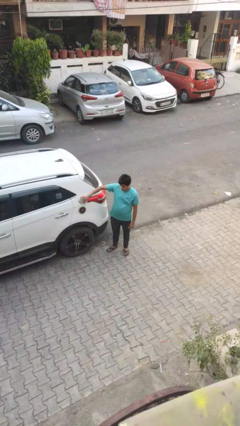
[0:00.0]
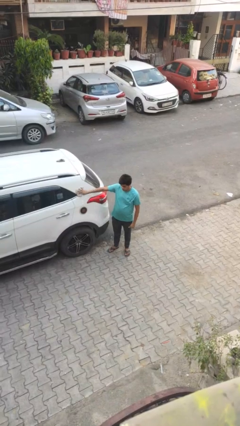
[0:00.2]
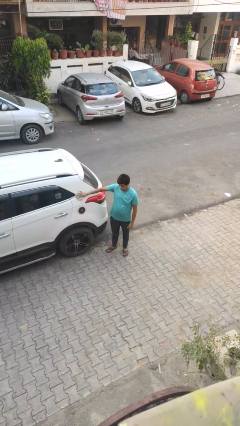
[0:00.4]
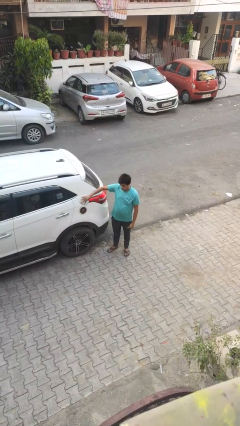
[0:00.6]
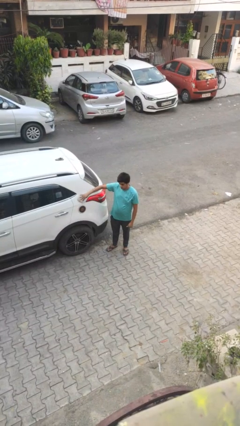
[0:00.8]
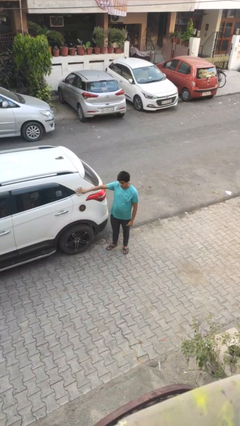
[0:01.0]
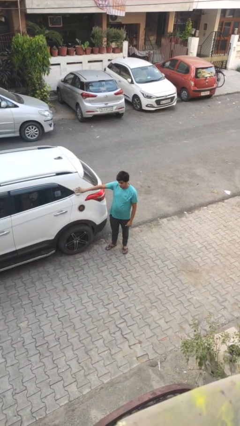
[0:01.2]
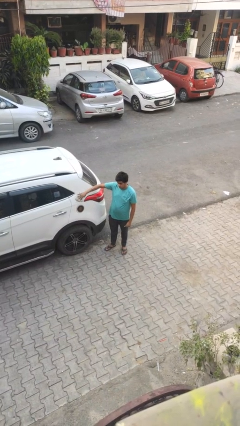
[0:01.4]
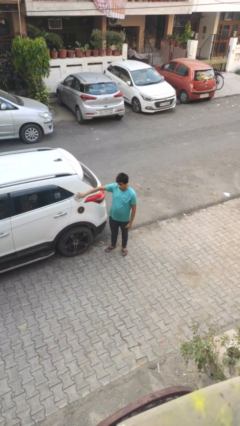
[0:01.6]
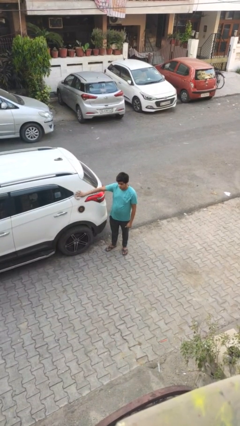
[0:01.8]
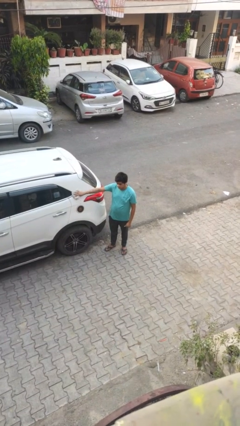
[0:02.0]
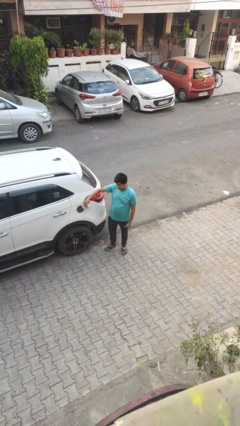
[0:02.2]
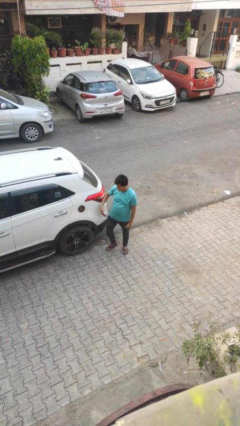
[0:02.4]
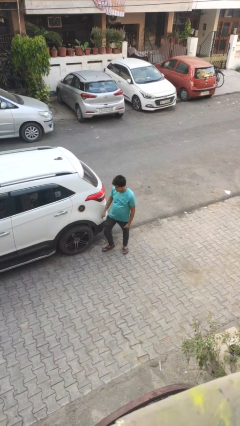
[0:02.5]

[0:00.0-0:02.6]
person polishes car with rag

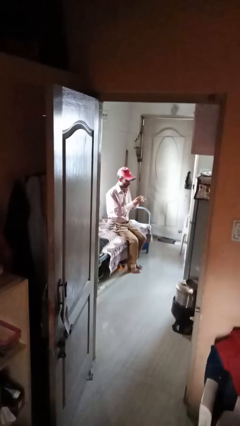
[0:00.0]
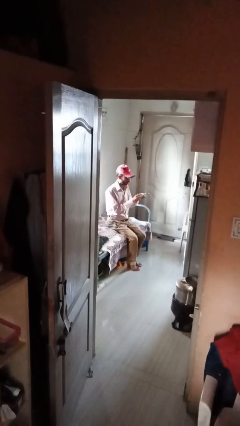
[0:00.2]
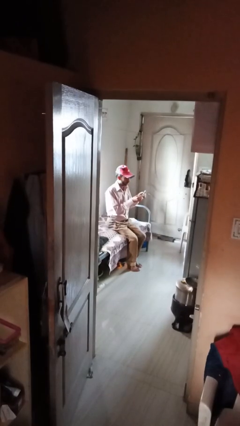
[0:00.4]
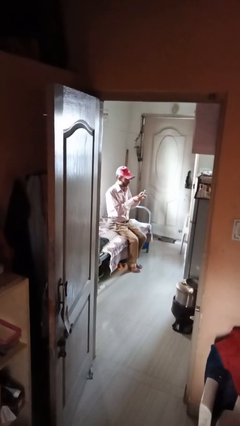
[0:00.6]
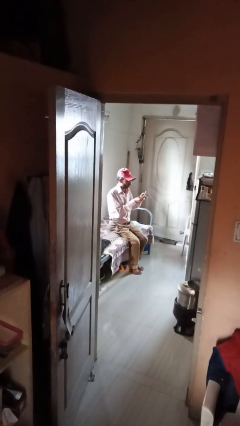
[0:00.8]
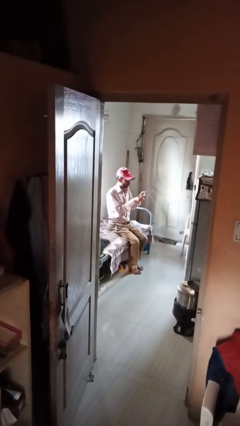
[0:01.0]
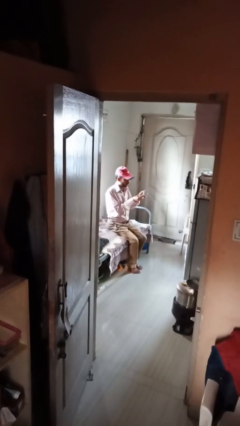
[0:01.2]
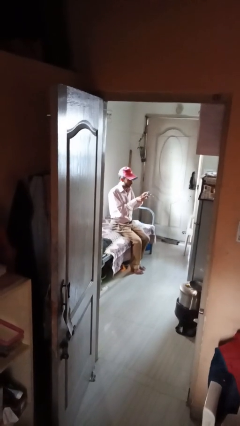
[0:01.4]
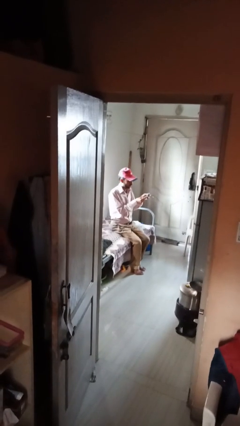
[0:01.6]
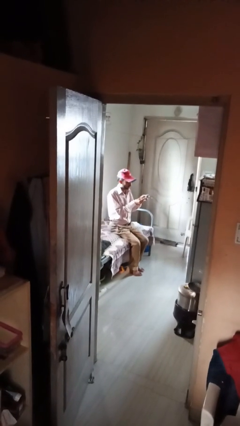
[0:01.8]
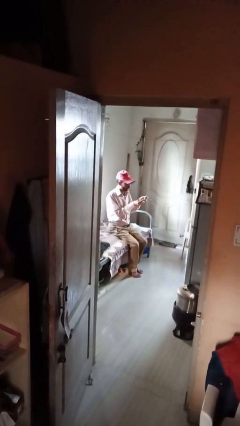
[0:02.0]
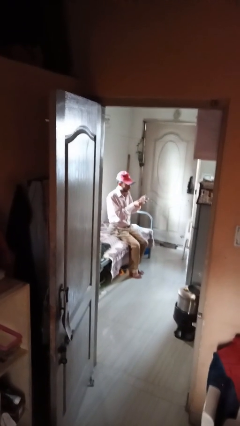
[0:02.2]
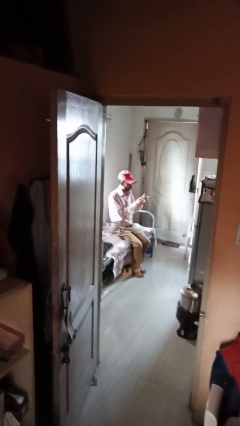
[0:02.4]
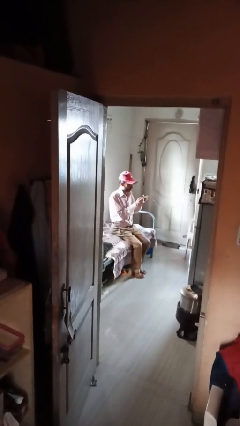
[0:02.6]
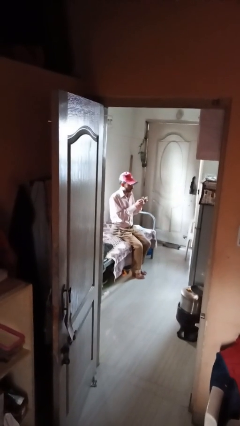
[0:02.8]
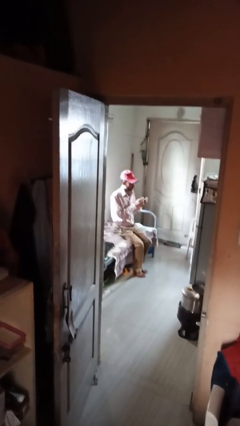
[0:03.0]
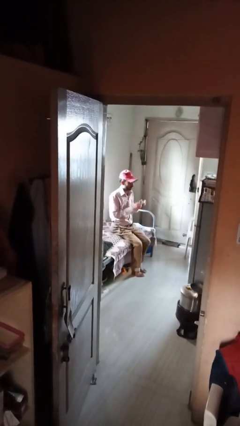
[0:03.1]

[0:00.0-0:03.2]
person files fingernails

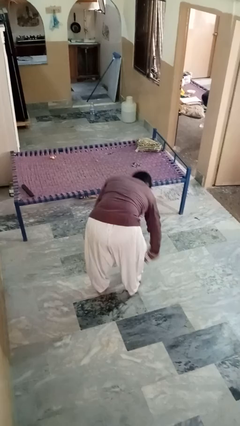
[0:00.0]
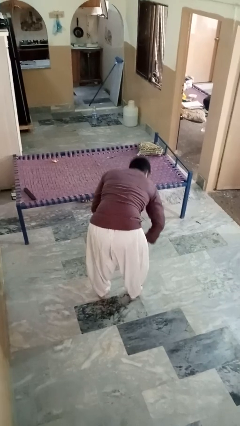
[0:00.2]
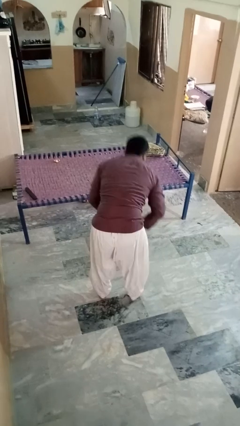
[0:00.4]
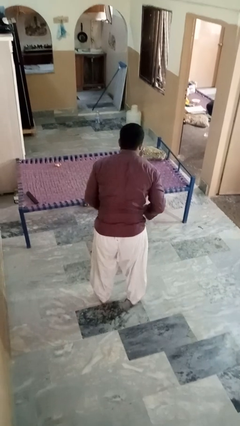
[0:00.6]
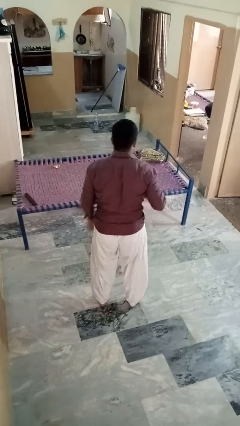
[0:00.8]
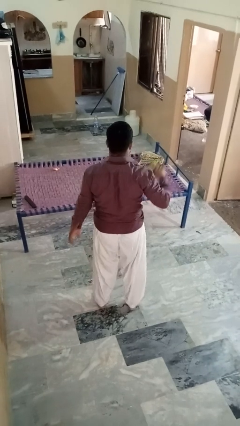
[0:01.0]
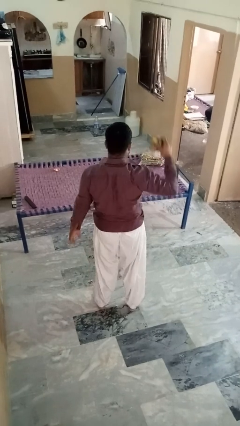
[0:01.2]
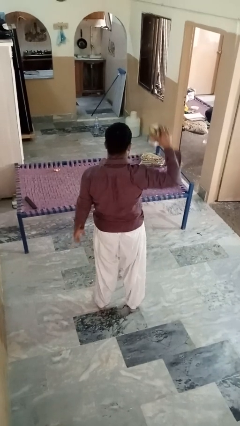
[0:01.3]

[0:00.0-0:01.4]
person picks up object from floor

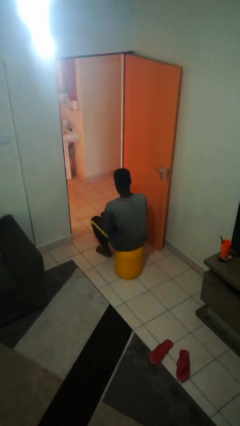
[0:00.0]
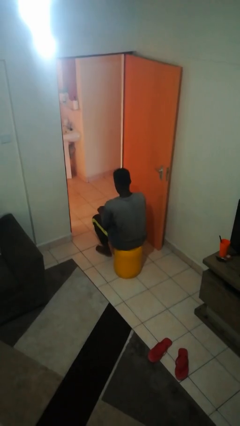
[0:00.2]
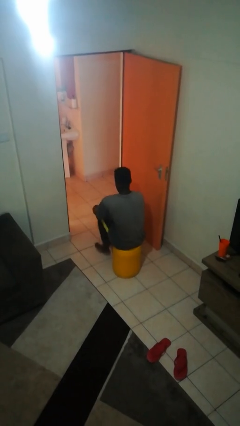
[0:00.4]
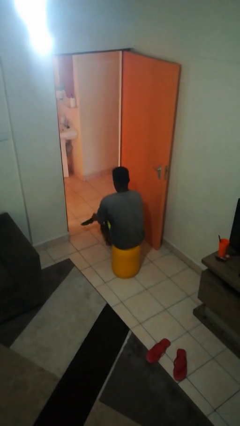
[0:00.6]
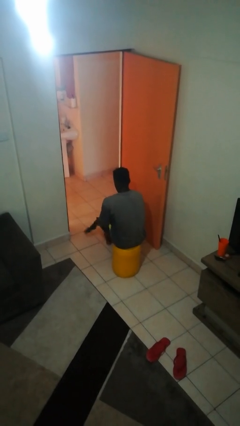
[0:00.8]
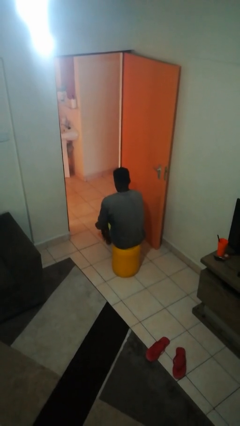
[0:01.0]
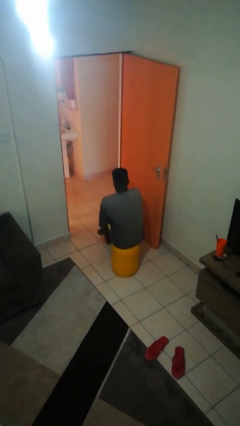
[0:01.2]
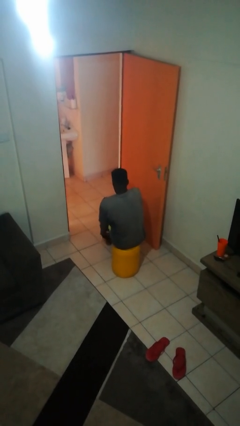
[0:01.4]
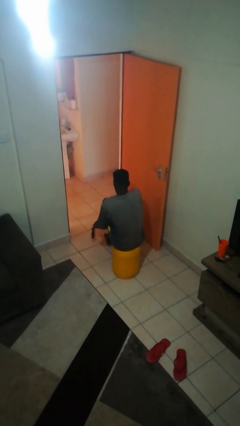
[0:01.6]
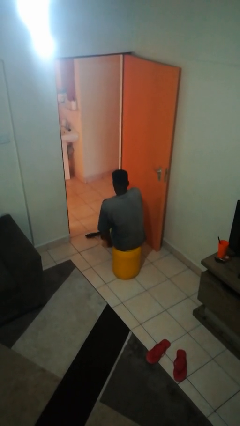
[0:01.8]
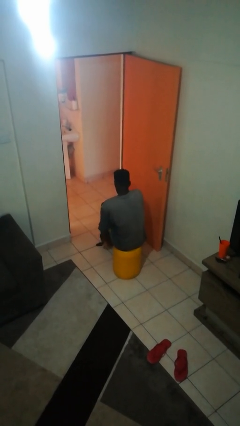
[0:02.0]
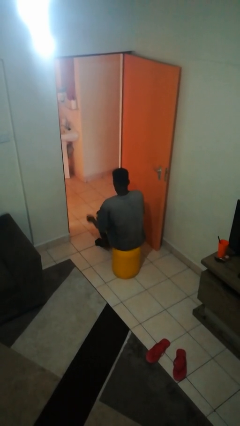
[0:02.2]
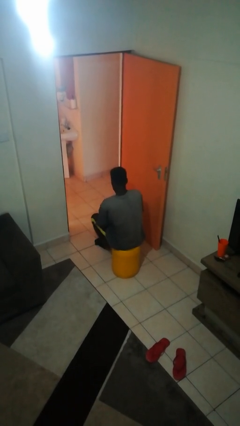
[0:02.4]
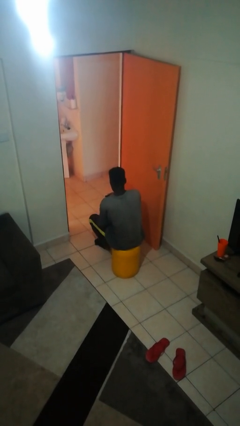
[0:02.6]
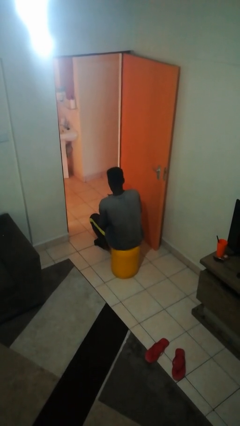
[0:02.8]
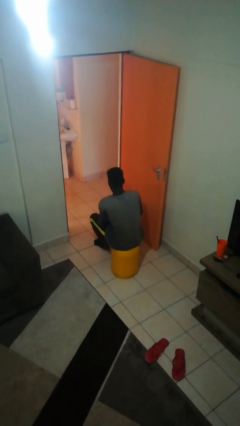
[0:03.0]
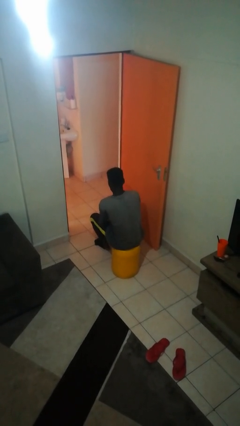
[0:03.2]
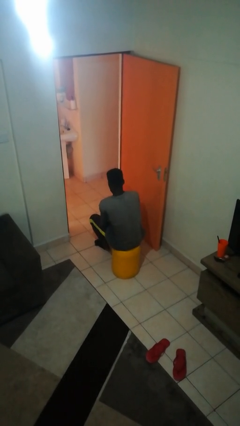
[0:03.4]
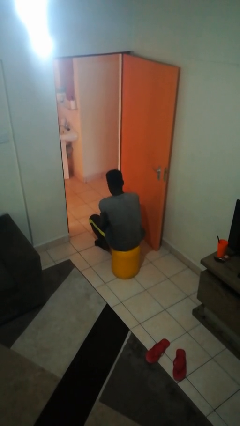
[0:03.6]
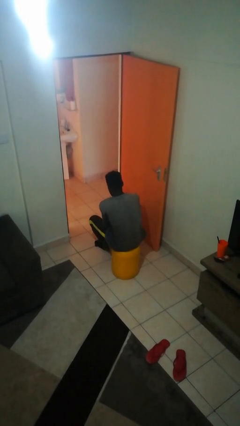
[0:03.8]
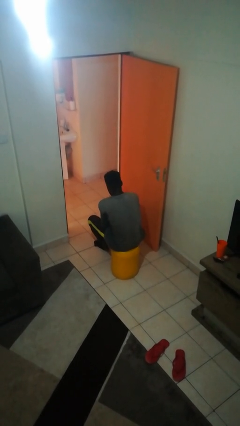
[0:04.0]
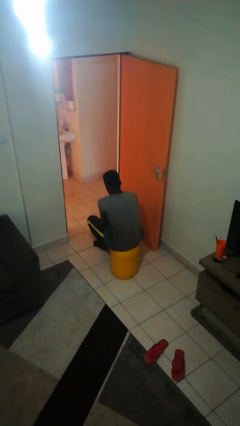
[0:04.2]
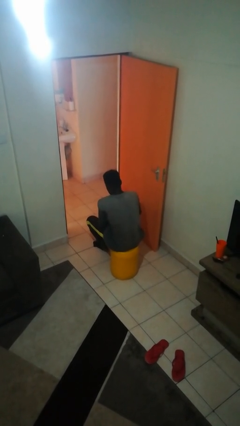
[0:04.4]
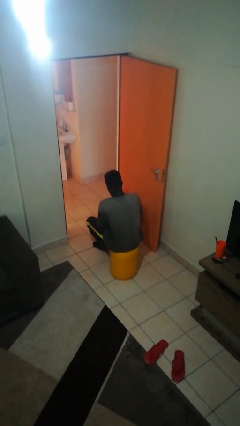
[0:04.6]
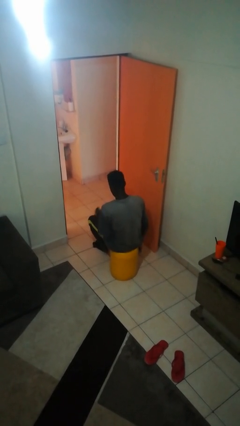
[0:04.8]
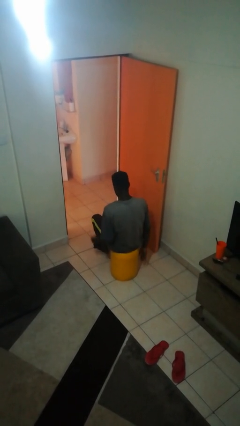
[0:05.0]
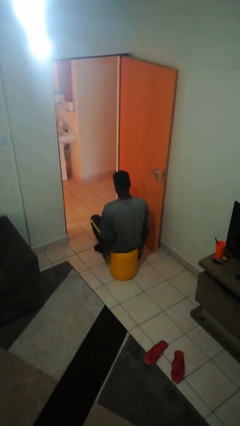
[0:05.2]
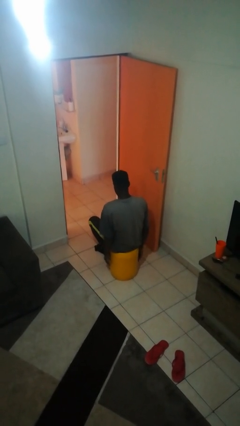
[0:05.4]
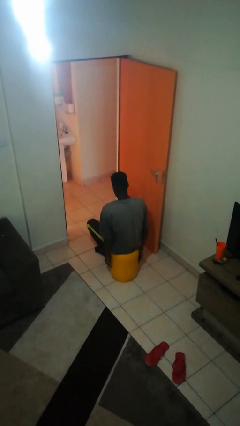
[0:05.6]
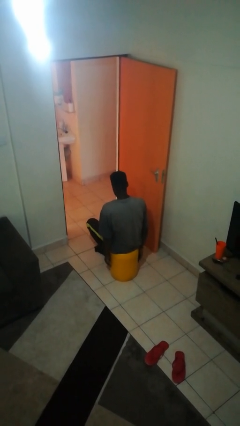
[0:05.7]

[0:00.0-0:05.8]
person puts on socks

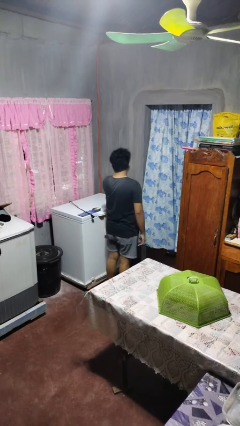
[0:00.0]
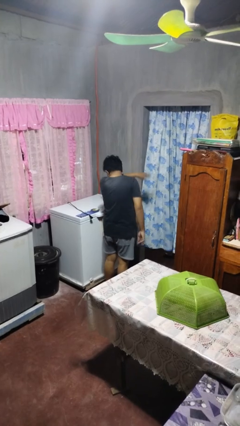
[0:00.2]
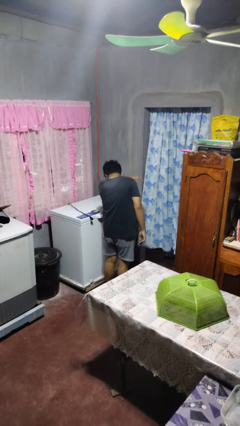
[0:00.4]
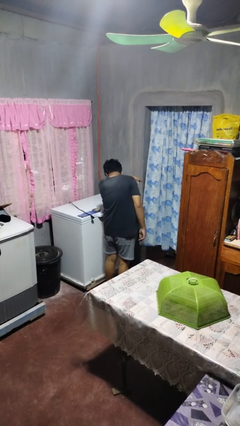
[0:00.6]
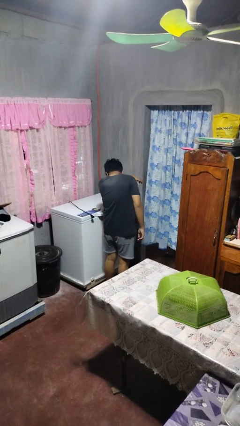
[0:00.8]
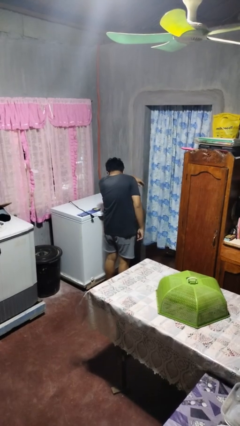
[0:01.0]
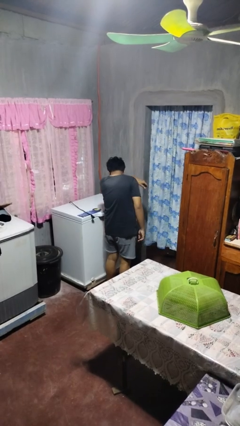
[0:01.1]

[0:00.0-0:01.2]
person sneezes into arm

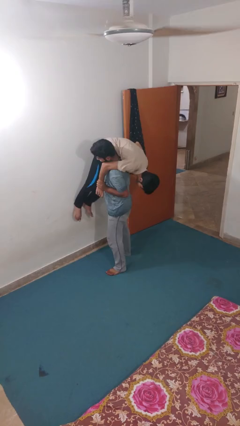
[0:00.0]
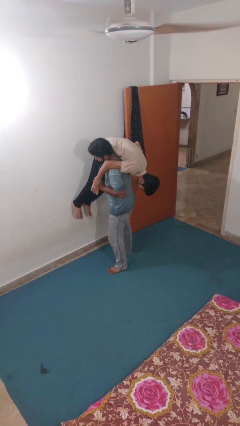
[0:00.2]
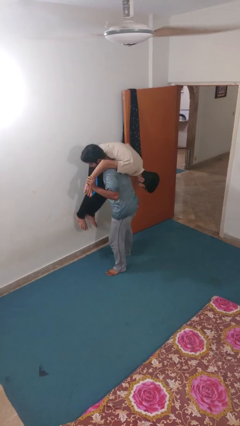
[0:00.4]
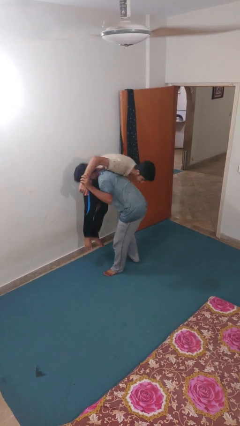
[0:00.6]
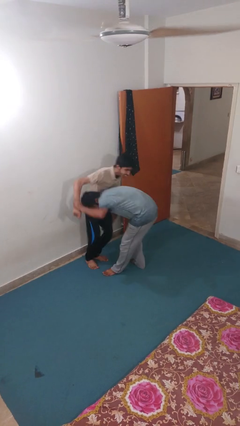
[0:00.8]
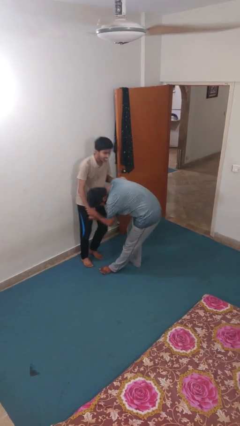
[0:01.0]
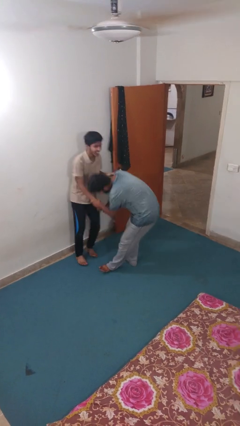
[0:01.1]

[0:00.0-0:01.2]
person puts down person

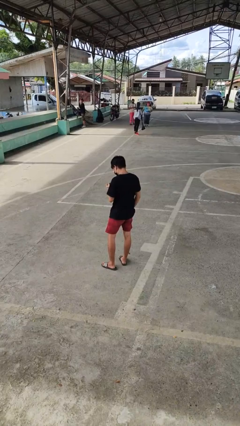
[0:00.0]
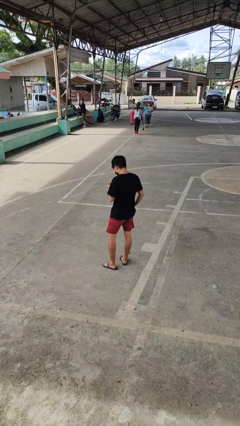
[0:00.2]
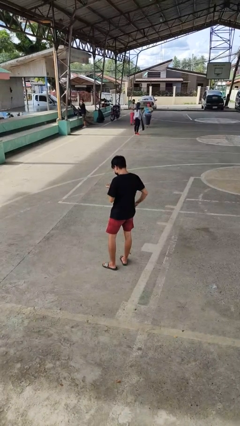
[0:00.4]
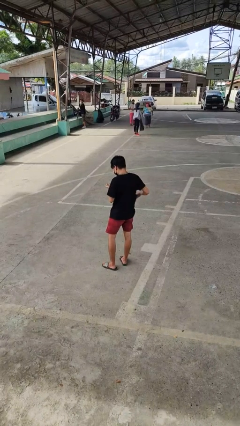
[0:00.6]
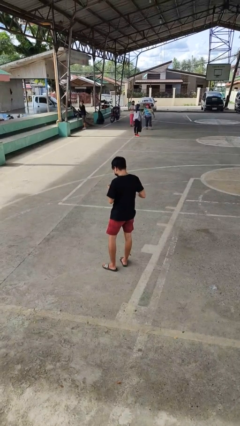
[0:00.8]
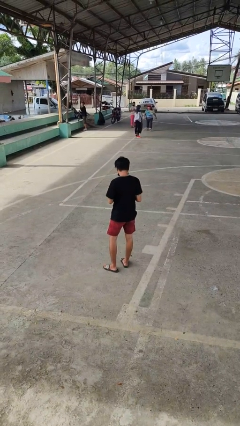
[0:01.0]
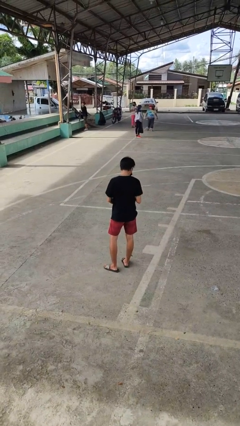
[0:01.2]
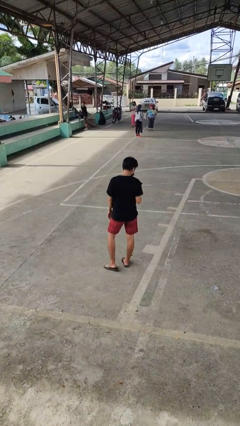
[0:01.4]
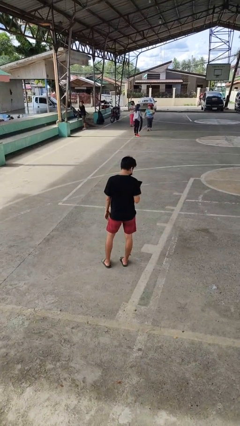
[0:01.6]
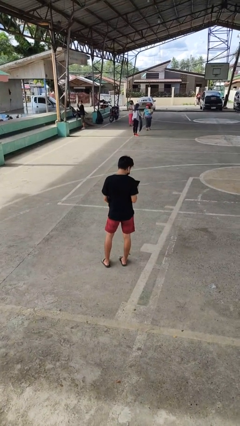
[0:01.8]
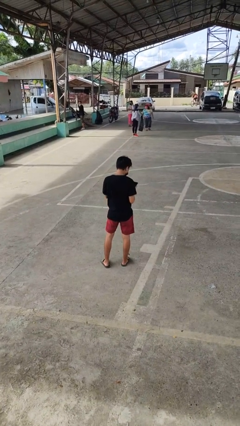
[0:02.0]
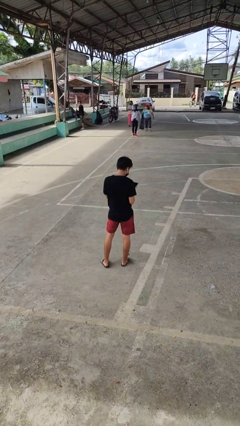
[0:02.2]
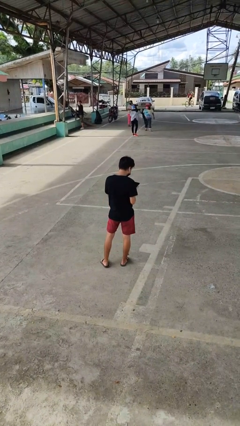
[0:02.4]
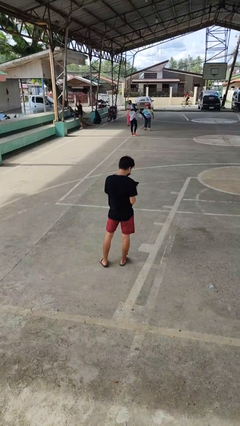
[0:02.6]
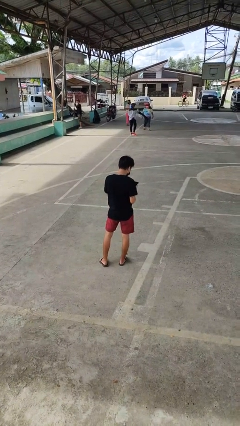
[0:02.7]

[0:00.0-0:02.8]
person takes phone from pocket
